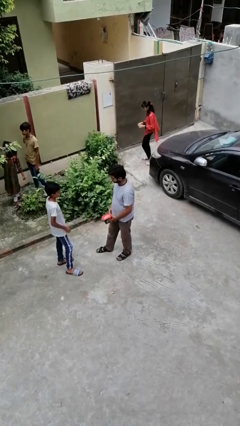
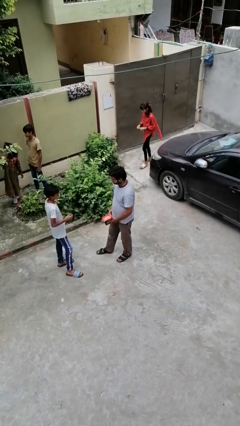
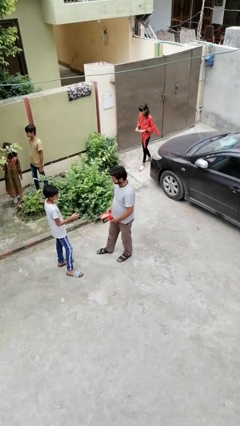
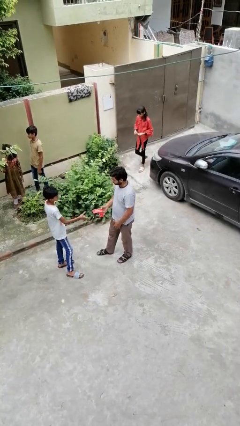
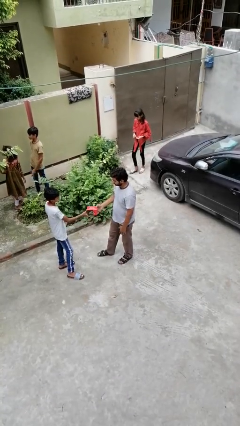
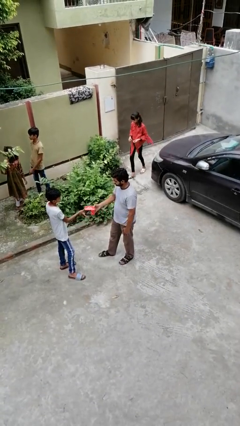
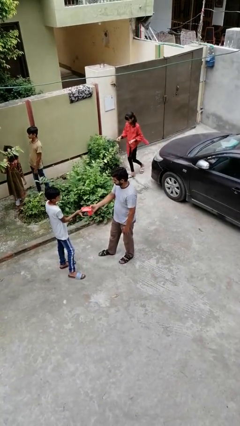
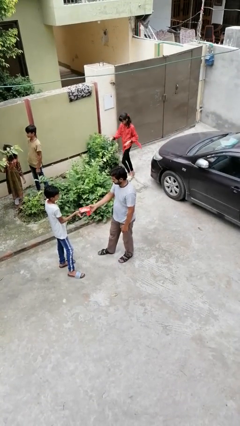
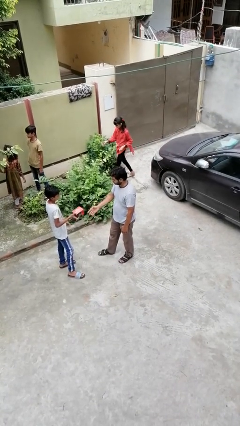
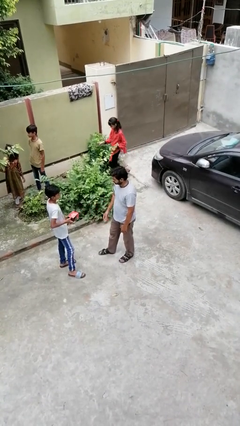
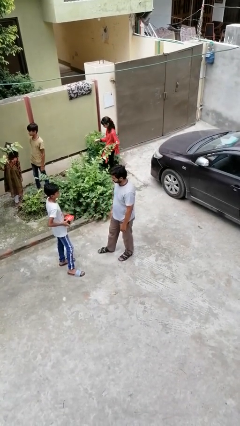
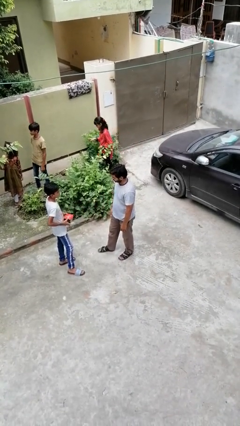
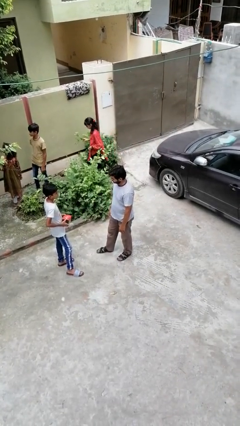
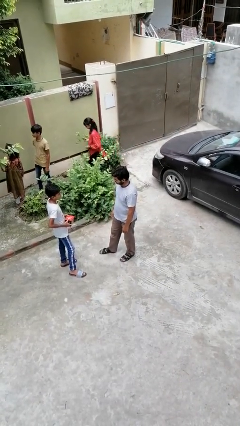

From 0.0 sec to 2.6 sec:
person transfers object to person

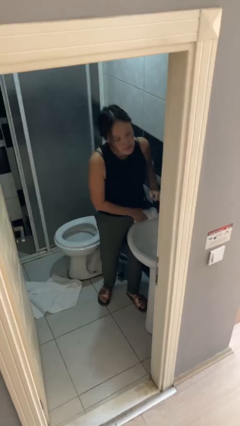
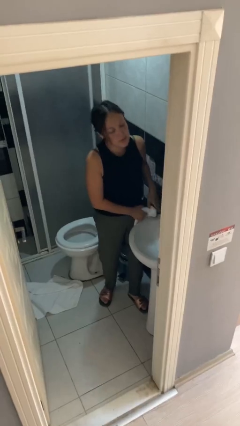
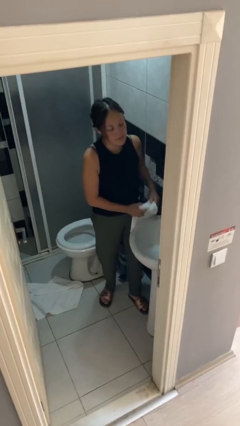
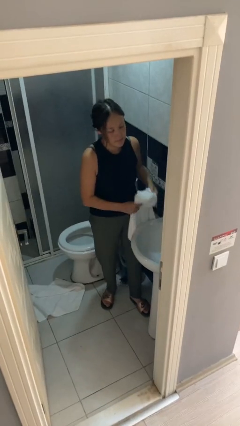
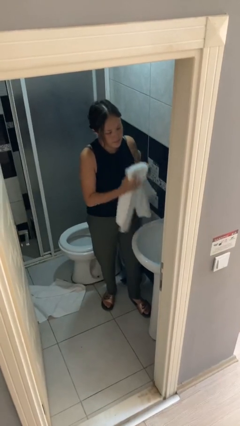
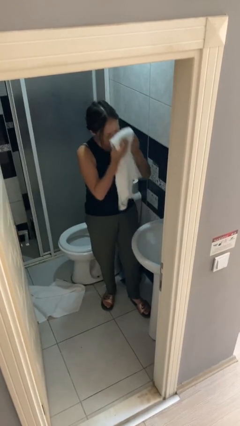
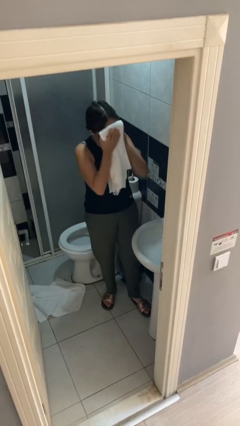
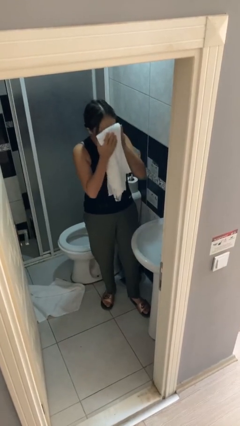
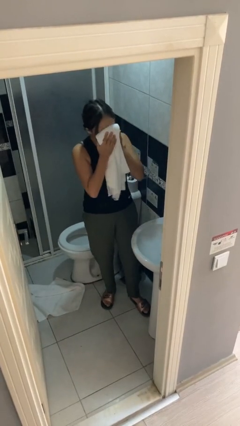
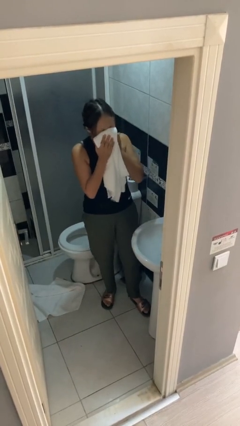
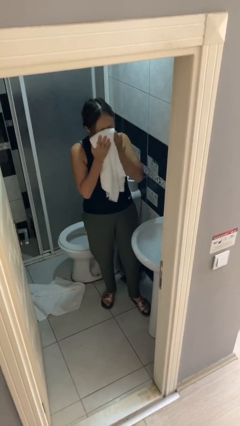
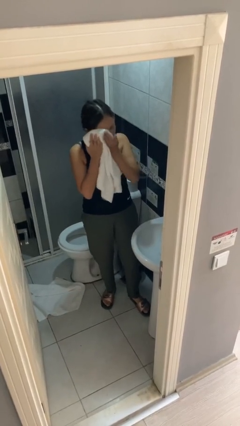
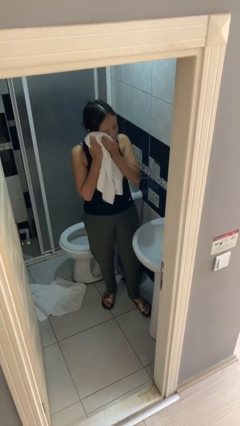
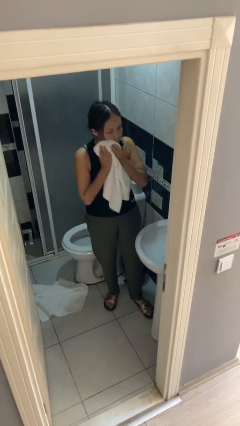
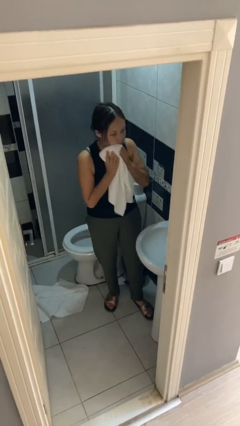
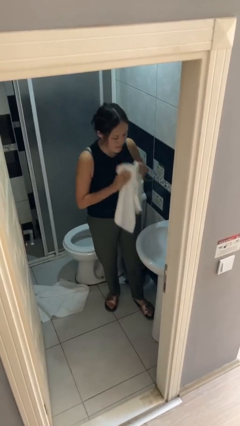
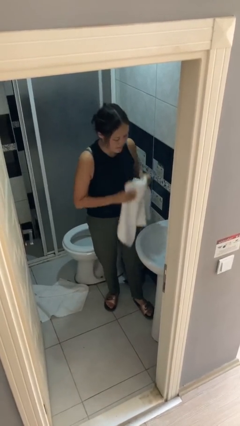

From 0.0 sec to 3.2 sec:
person dries face with towel

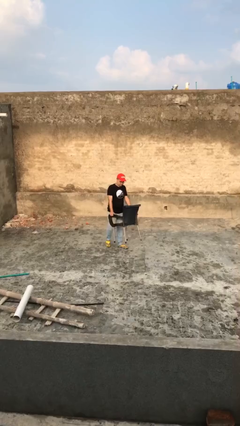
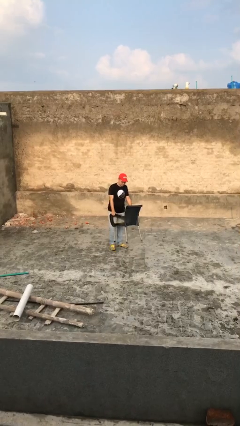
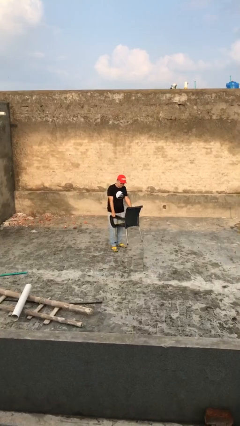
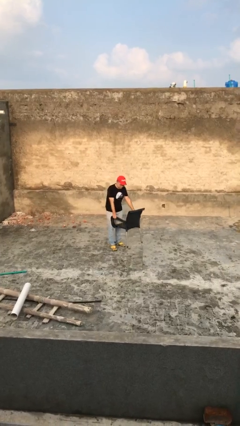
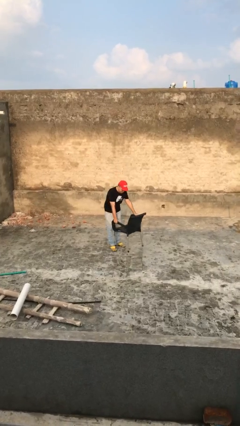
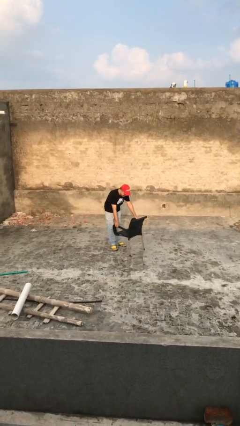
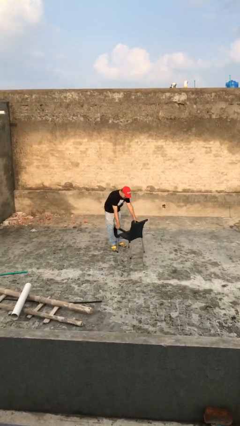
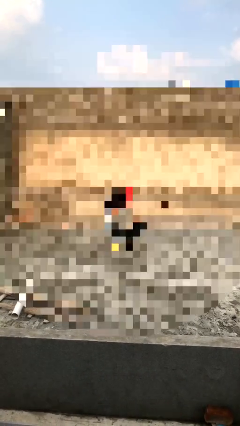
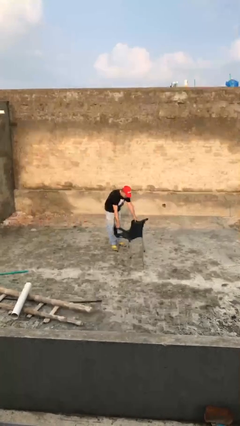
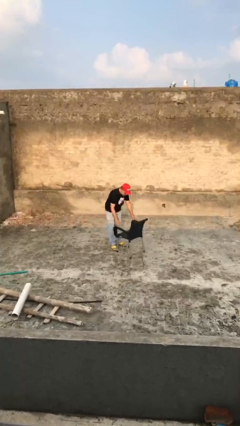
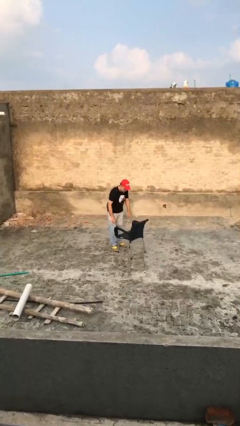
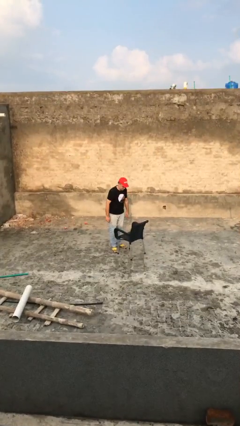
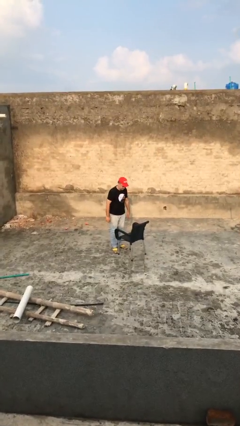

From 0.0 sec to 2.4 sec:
person puts down object on floor

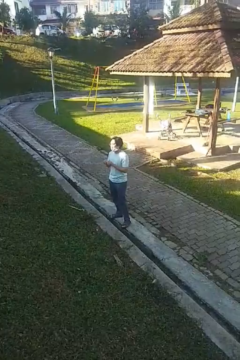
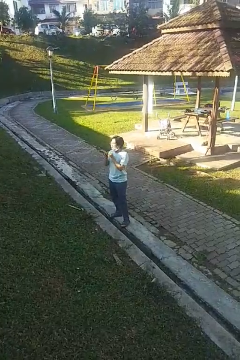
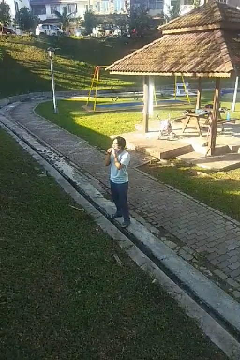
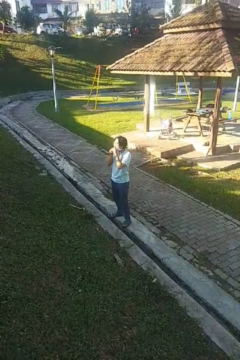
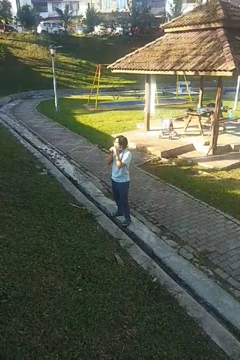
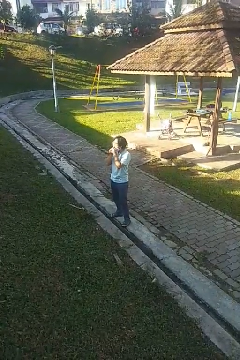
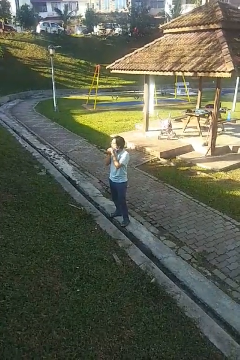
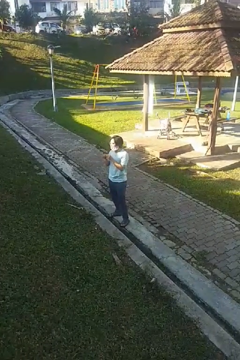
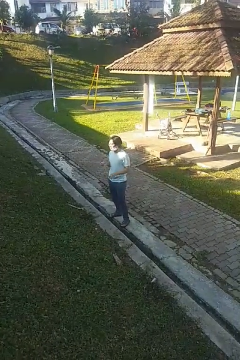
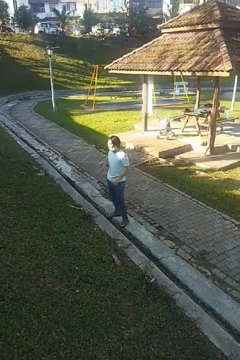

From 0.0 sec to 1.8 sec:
person flosses

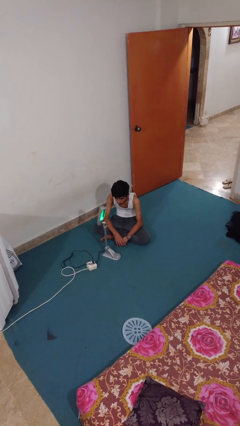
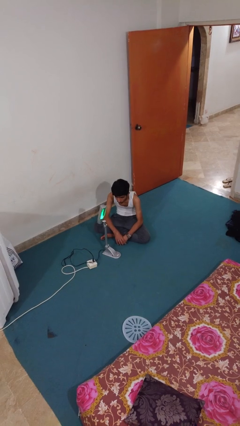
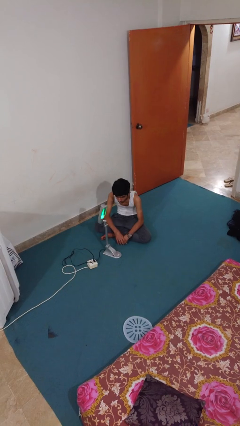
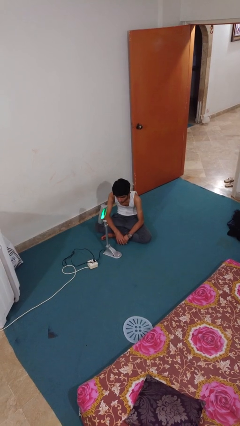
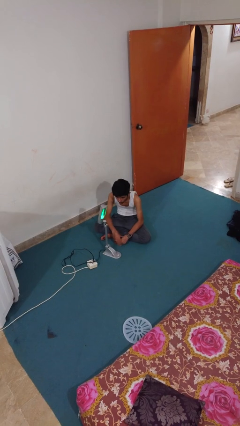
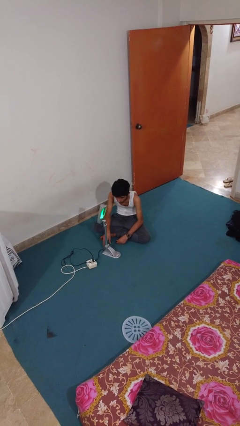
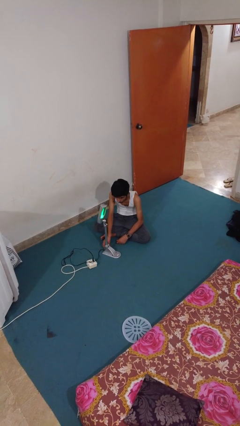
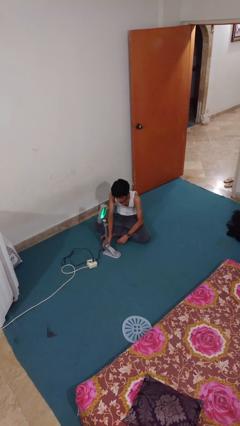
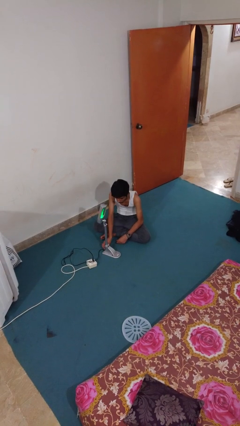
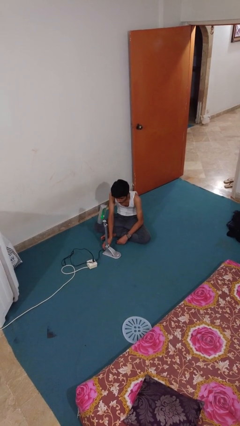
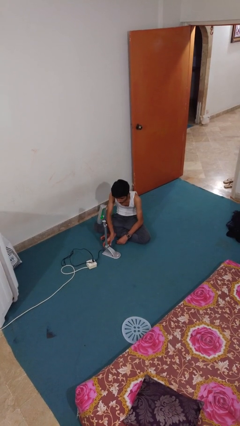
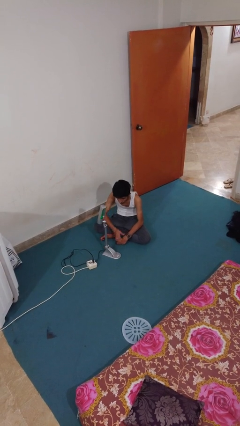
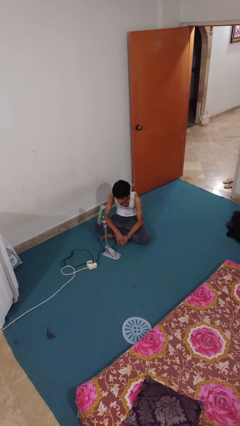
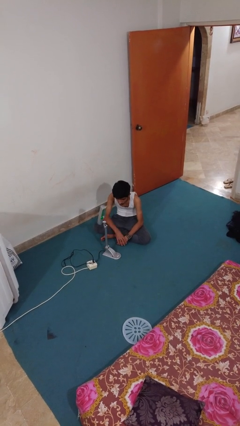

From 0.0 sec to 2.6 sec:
person turns off lamp

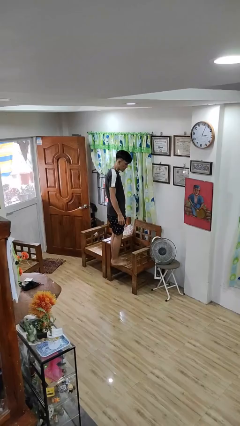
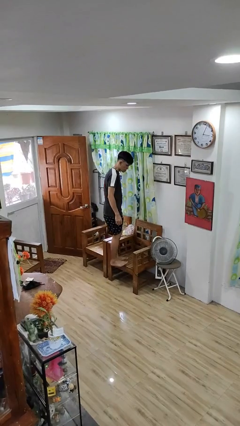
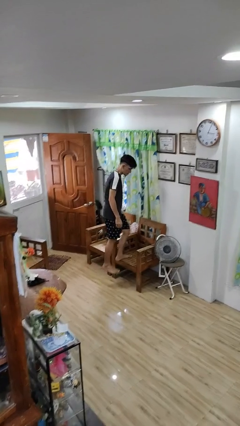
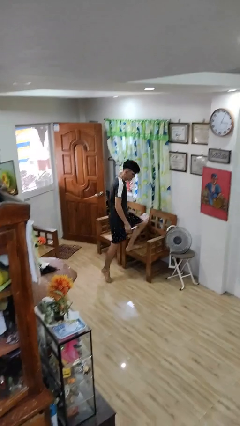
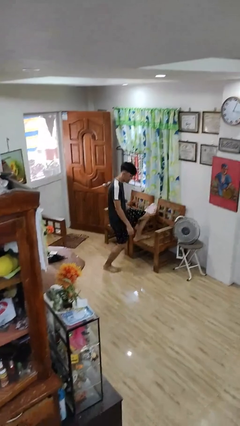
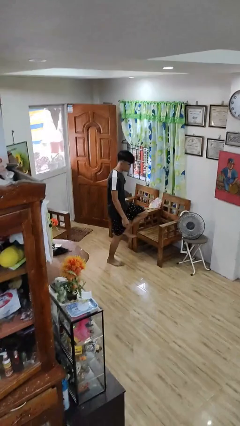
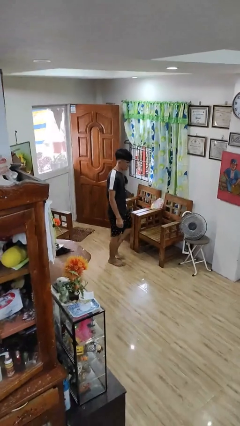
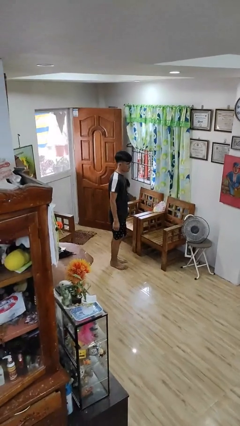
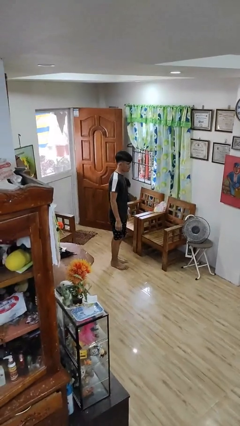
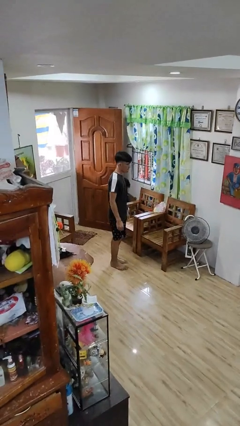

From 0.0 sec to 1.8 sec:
person climbs off chair

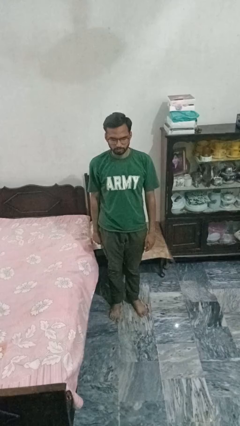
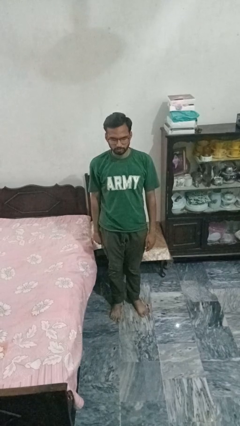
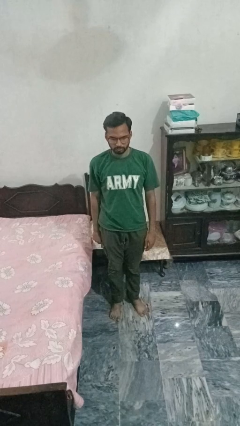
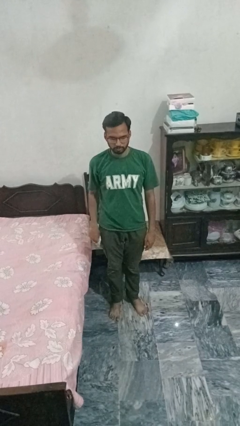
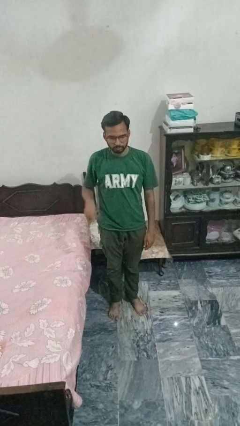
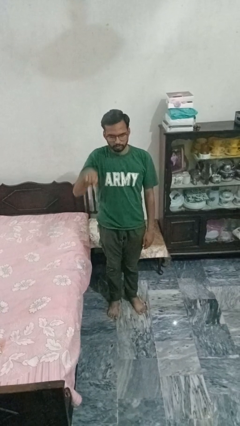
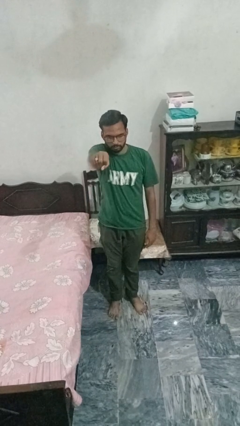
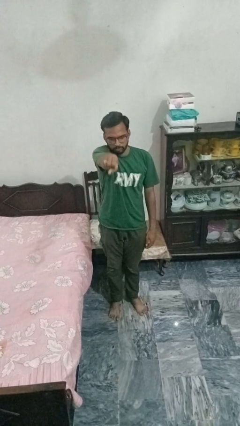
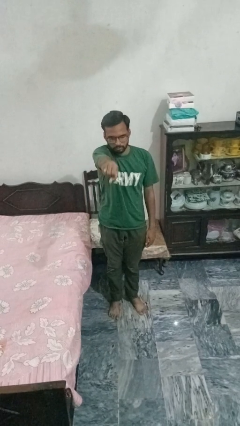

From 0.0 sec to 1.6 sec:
person punches

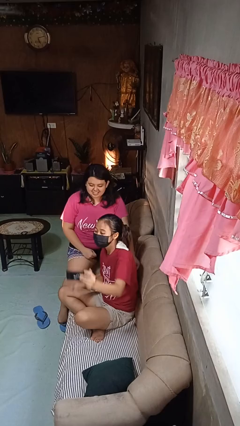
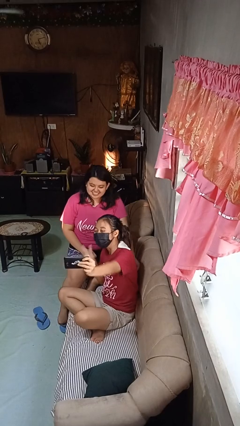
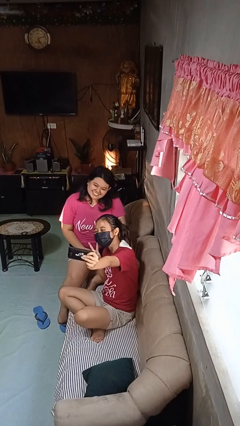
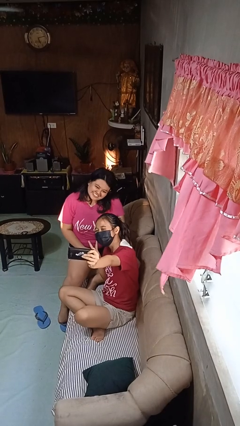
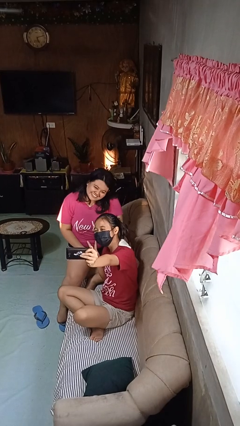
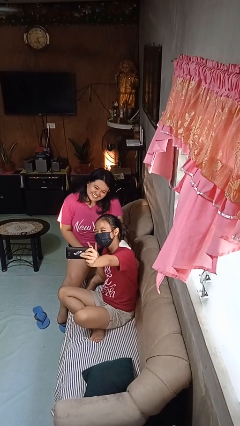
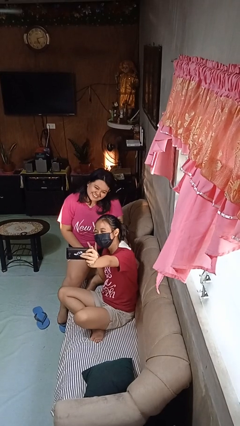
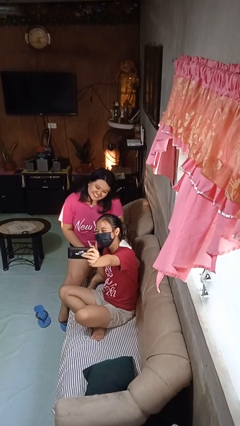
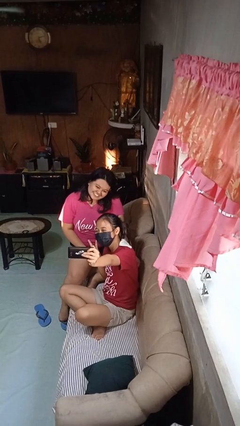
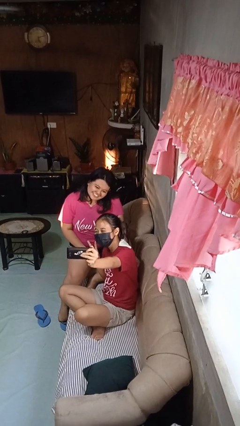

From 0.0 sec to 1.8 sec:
person takes selfie with person
